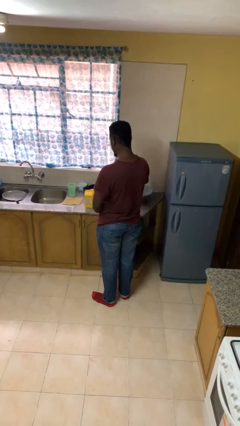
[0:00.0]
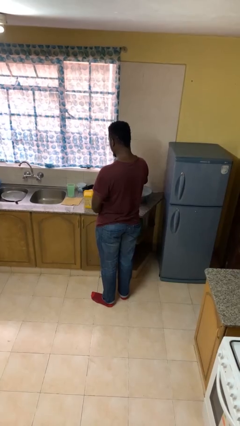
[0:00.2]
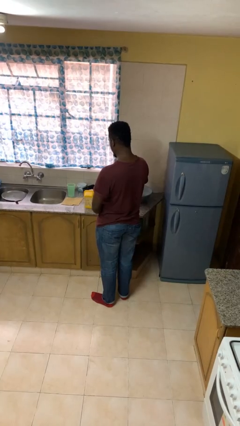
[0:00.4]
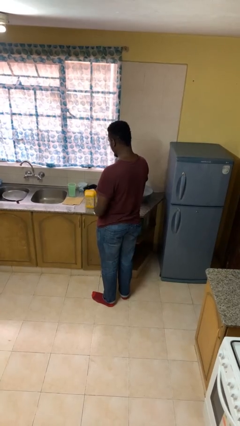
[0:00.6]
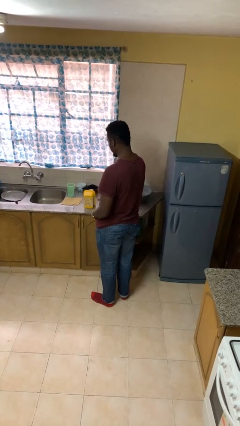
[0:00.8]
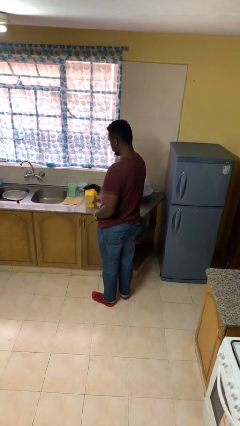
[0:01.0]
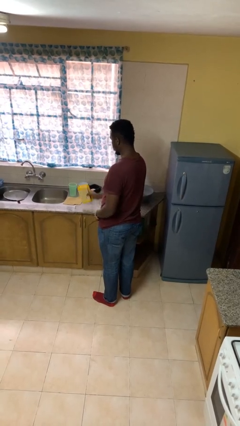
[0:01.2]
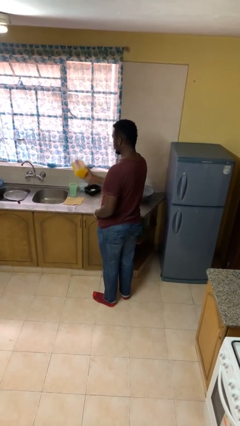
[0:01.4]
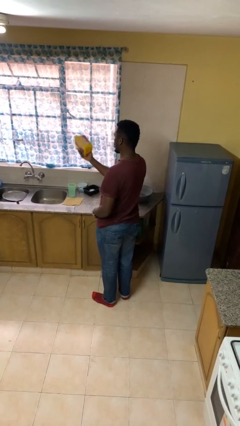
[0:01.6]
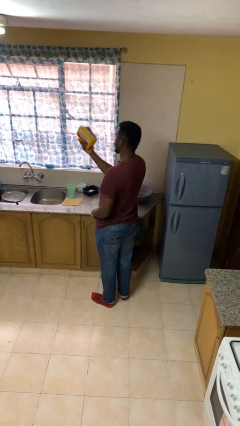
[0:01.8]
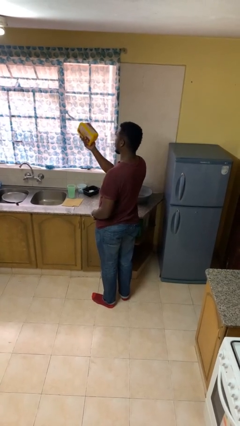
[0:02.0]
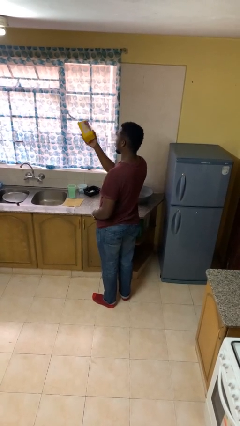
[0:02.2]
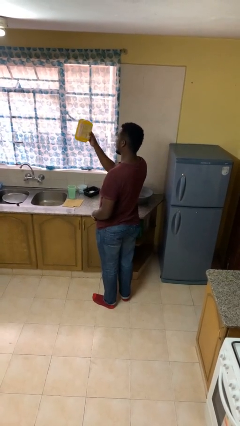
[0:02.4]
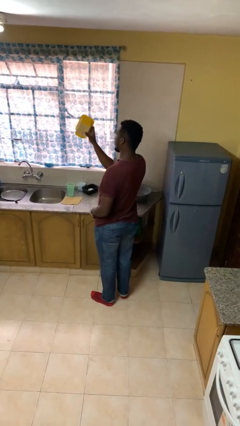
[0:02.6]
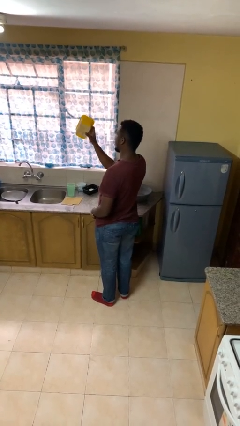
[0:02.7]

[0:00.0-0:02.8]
person picks up object from countertop

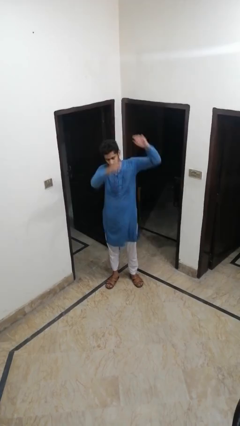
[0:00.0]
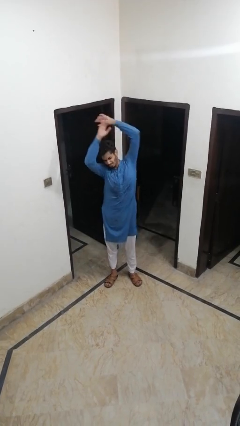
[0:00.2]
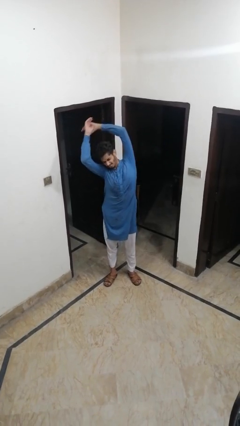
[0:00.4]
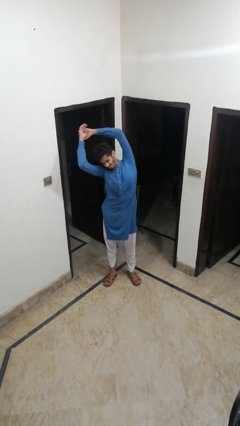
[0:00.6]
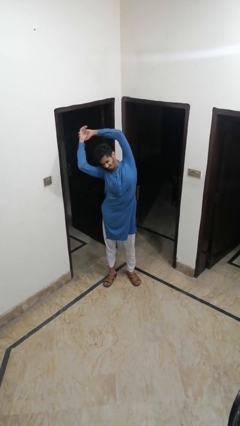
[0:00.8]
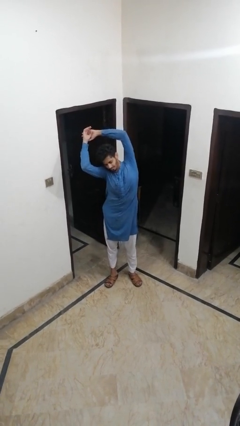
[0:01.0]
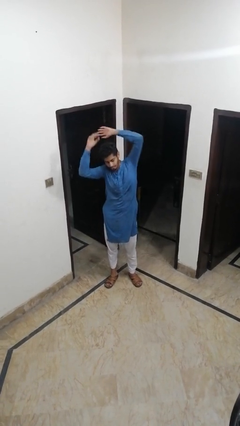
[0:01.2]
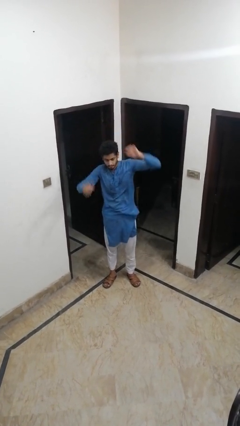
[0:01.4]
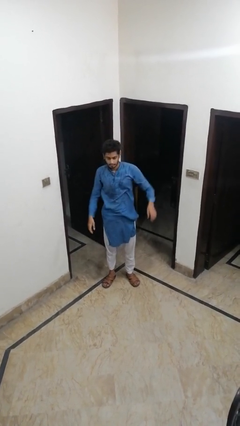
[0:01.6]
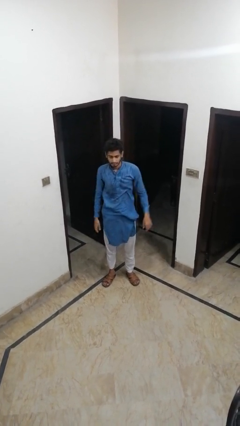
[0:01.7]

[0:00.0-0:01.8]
person stretches arms to side

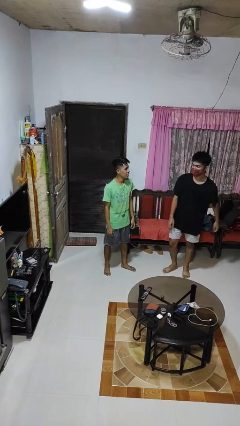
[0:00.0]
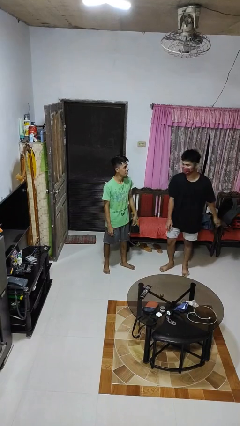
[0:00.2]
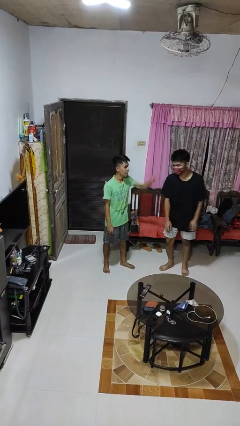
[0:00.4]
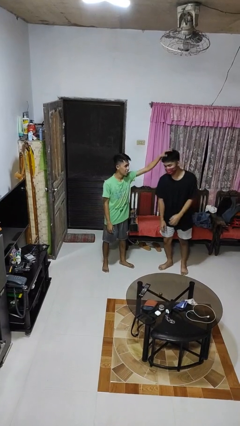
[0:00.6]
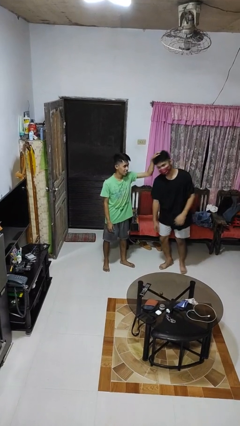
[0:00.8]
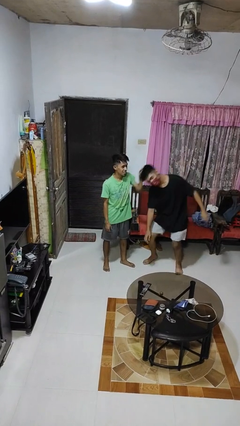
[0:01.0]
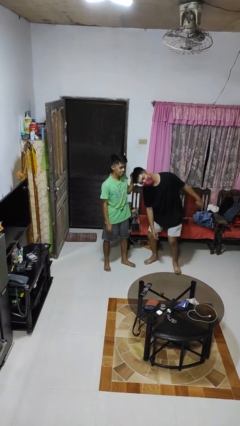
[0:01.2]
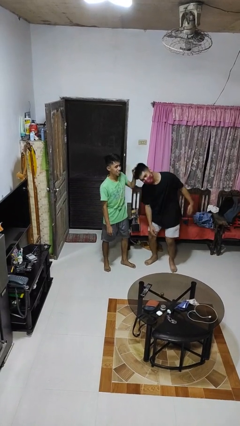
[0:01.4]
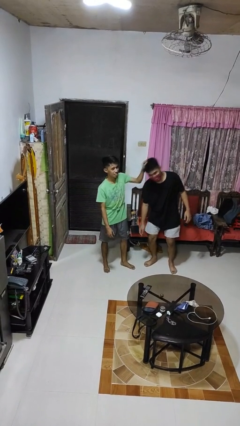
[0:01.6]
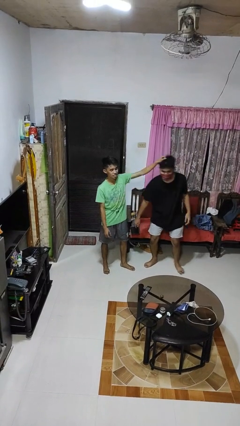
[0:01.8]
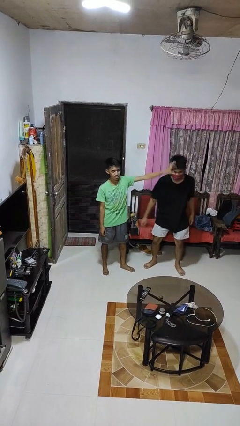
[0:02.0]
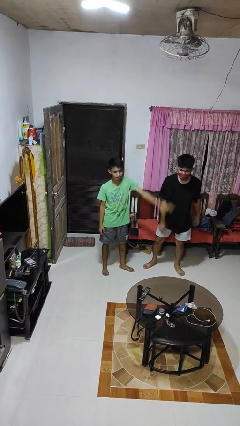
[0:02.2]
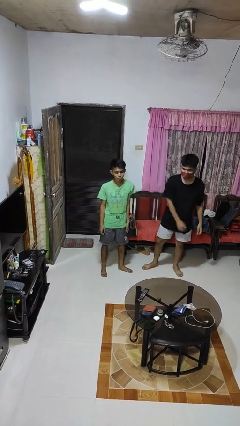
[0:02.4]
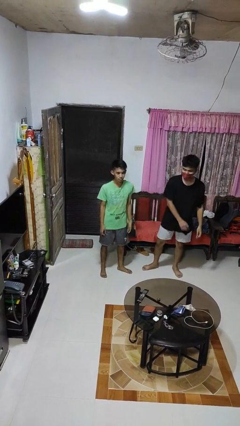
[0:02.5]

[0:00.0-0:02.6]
person grabs person by hair

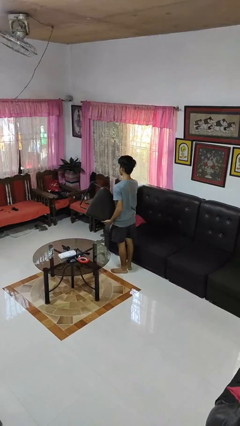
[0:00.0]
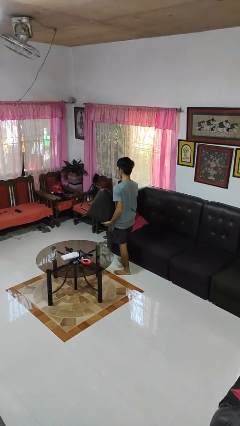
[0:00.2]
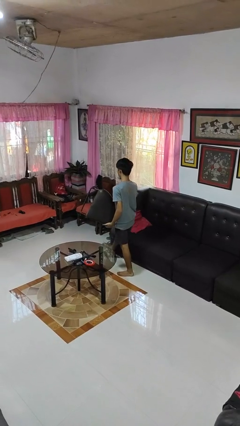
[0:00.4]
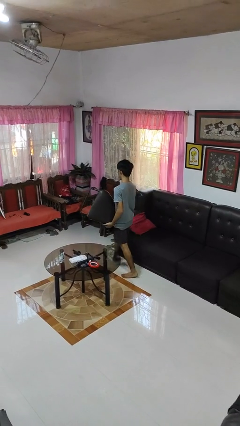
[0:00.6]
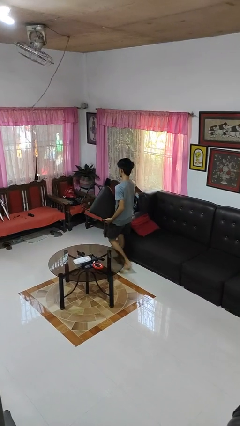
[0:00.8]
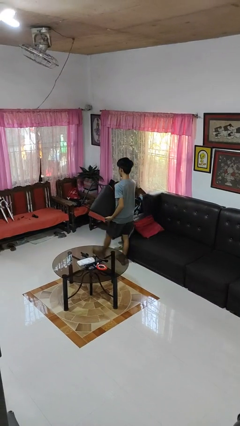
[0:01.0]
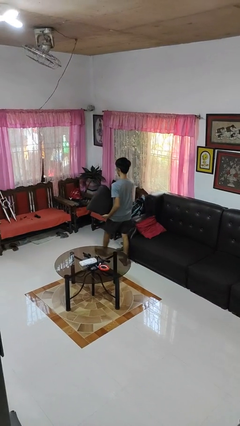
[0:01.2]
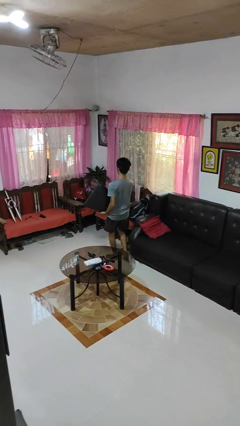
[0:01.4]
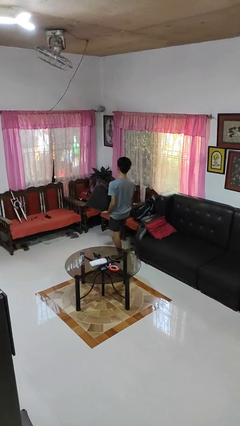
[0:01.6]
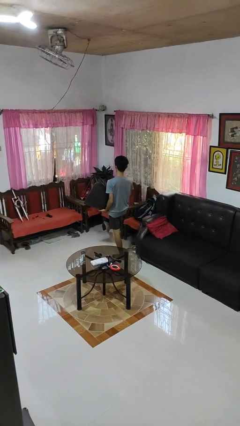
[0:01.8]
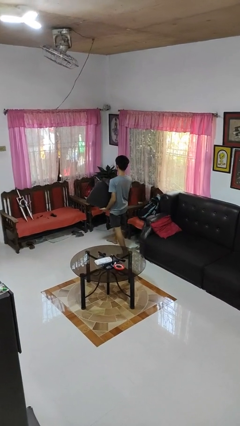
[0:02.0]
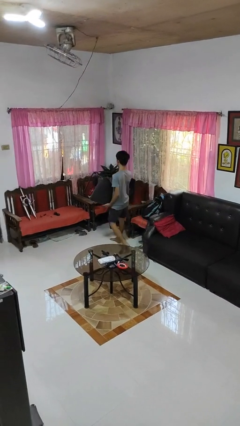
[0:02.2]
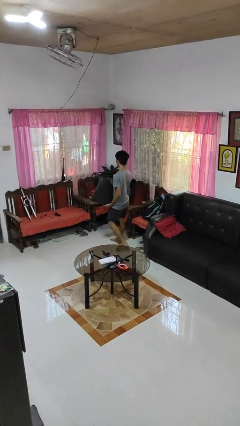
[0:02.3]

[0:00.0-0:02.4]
person carries furniture

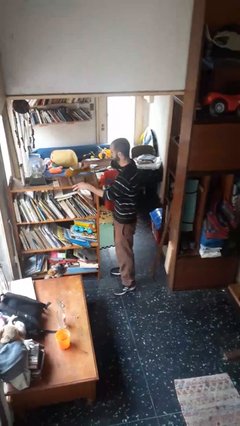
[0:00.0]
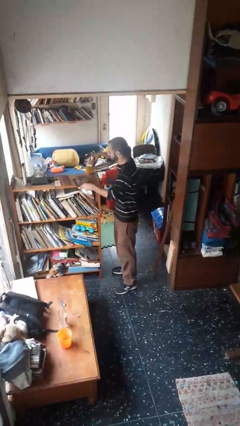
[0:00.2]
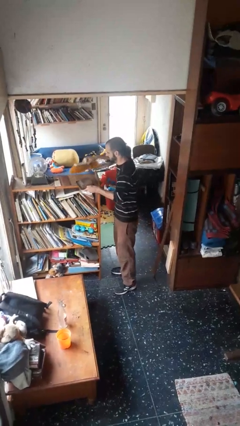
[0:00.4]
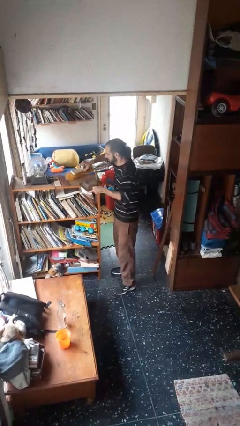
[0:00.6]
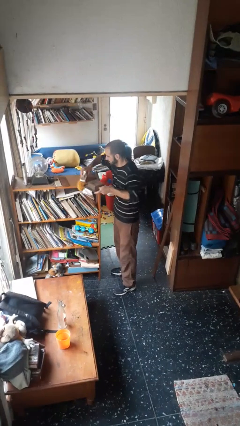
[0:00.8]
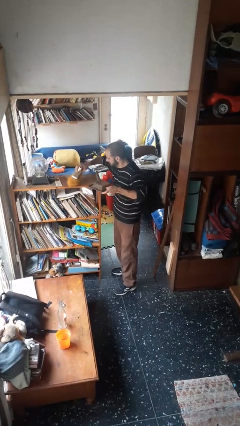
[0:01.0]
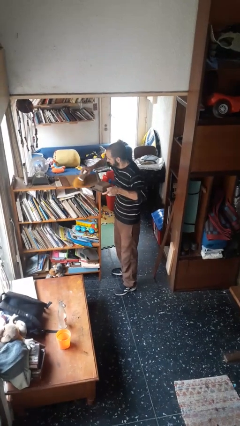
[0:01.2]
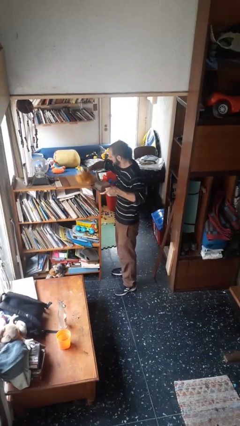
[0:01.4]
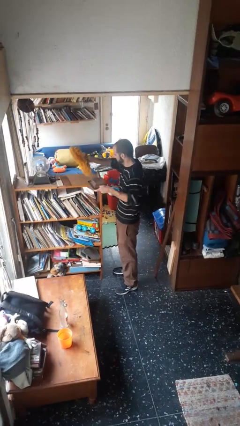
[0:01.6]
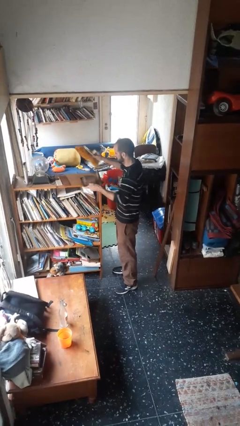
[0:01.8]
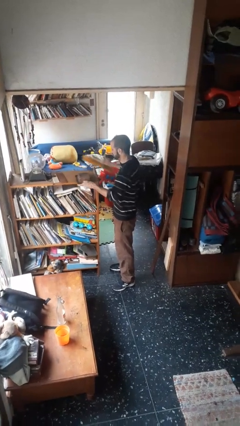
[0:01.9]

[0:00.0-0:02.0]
person dusts furniture

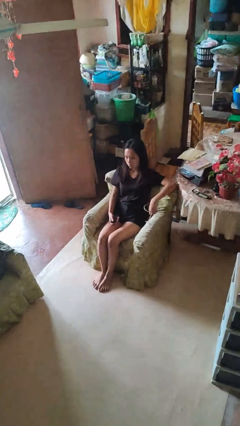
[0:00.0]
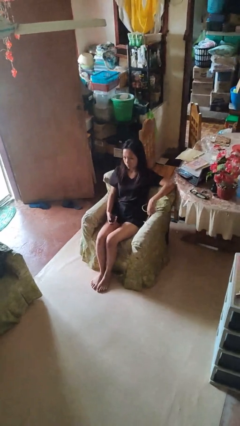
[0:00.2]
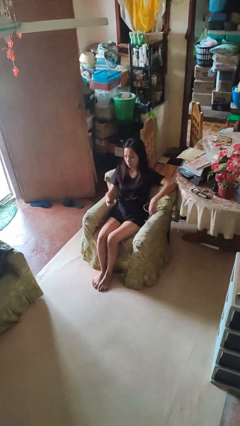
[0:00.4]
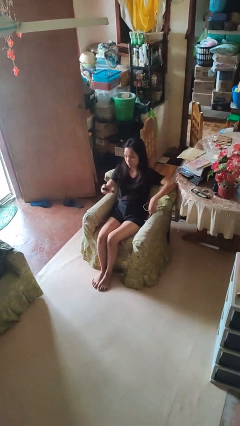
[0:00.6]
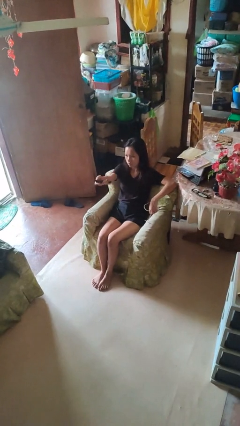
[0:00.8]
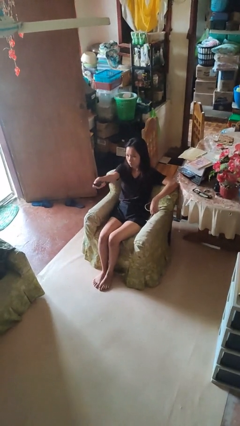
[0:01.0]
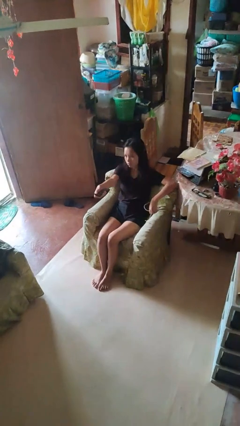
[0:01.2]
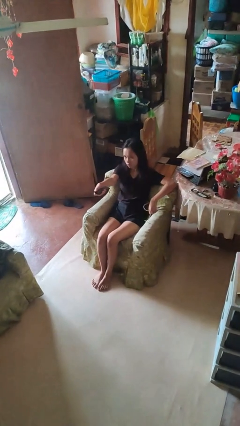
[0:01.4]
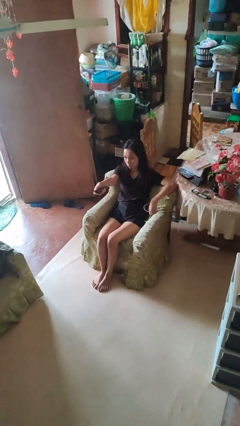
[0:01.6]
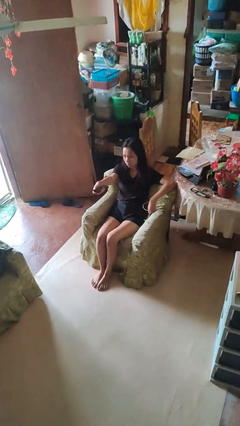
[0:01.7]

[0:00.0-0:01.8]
person uses television remote

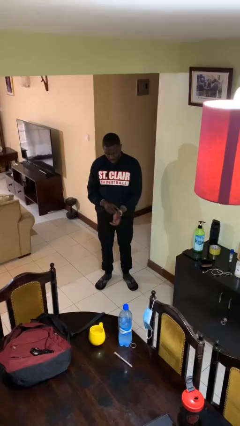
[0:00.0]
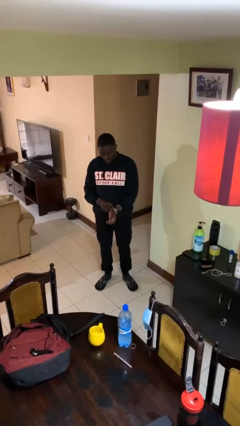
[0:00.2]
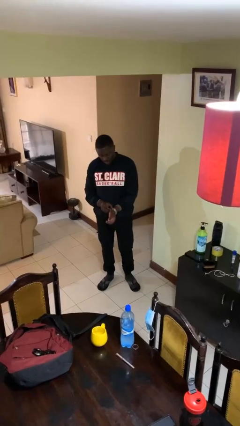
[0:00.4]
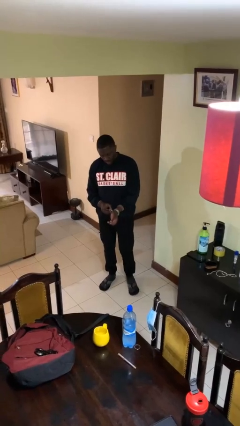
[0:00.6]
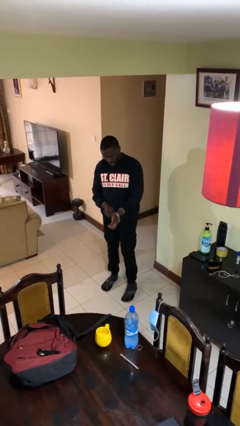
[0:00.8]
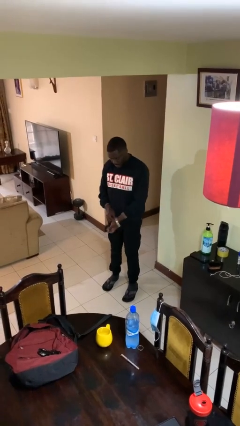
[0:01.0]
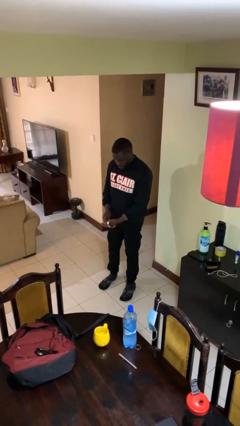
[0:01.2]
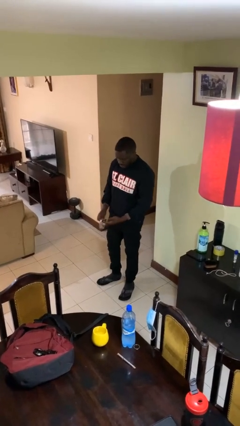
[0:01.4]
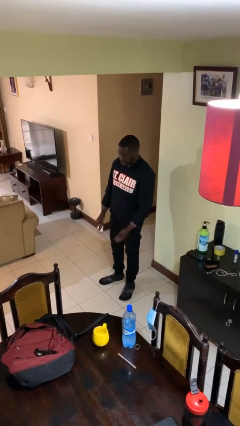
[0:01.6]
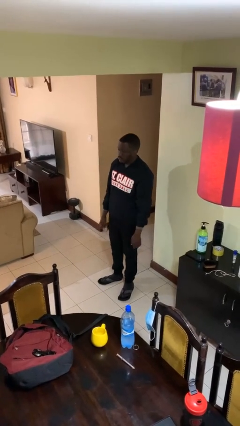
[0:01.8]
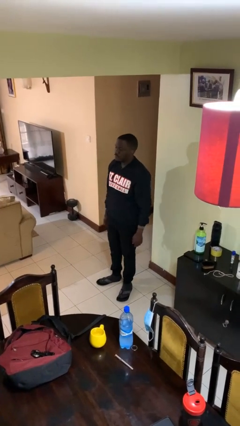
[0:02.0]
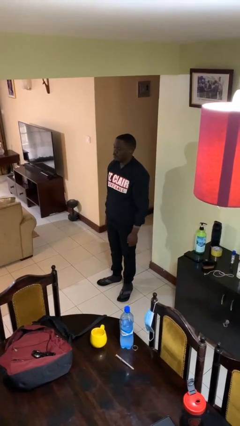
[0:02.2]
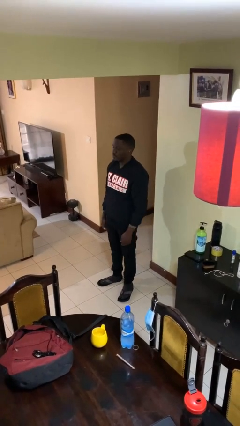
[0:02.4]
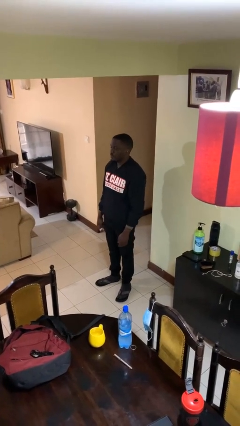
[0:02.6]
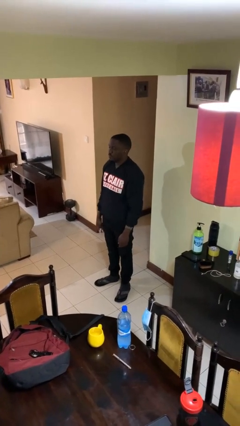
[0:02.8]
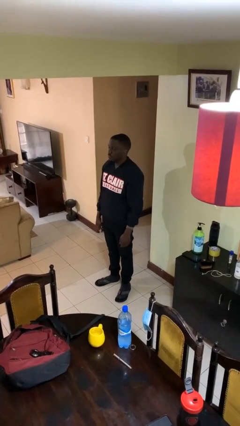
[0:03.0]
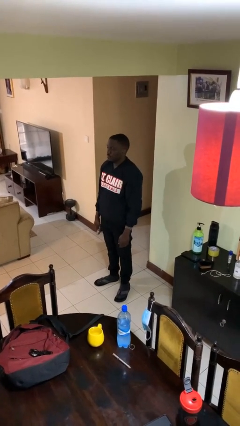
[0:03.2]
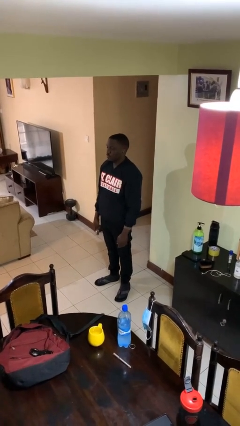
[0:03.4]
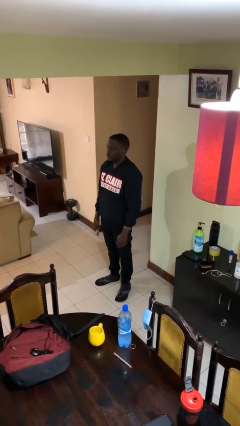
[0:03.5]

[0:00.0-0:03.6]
person takes off wristwatch
